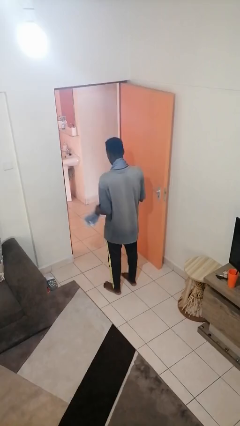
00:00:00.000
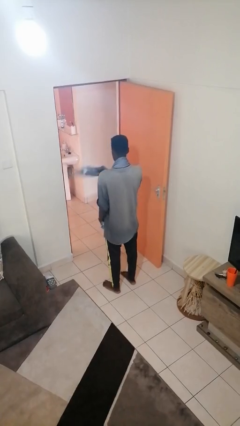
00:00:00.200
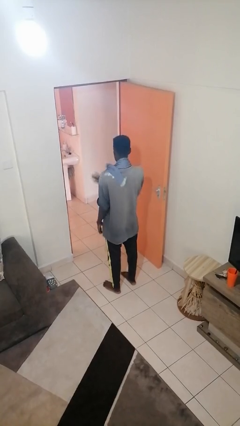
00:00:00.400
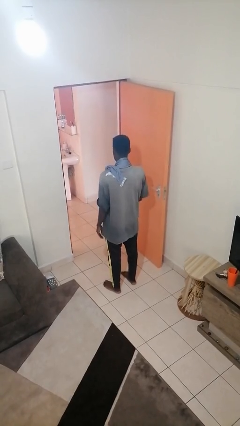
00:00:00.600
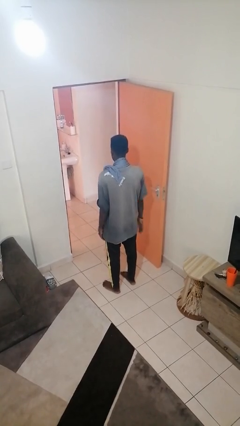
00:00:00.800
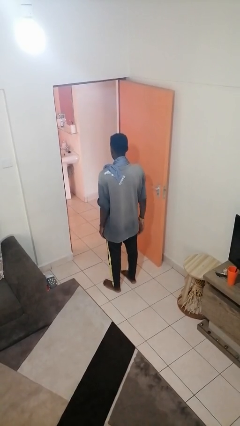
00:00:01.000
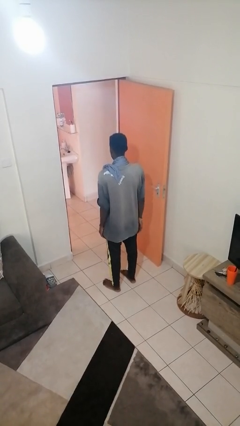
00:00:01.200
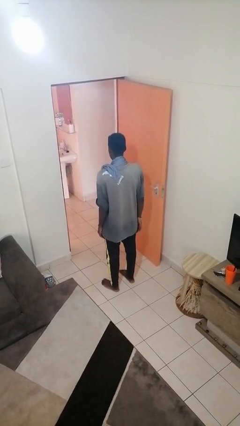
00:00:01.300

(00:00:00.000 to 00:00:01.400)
person puts on scarf

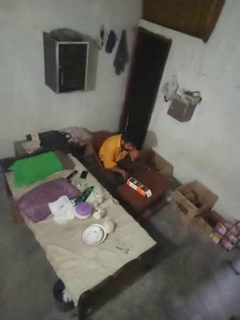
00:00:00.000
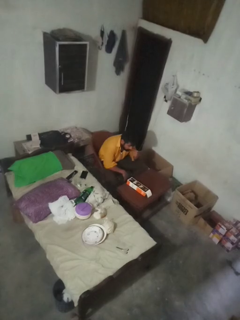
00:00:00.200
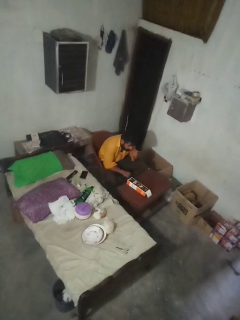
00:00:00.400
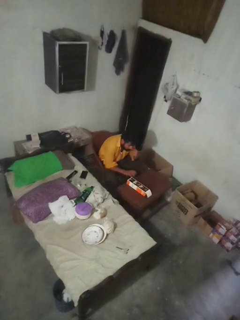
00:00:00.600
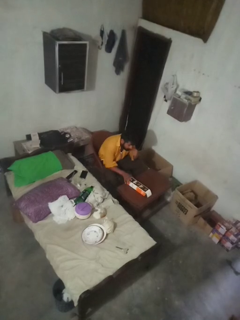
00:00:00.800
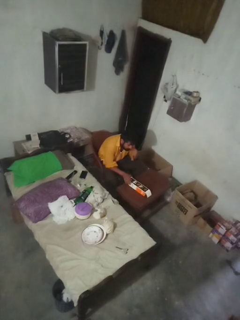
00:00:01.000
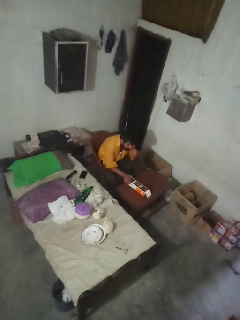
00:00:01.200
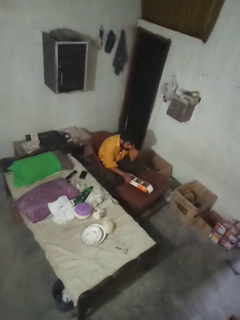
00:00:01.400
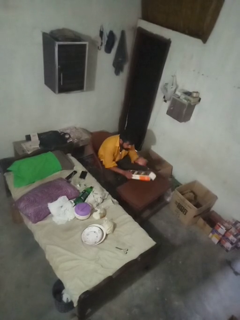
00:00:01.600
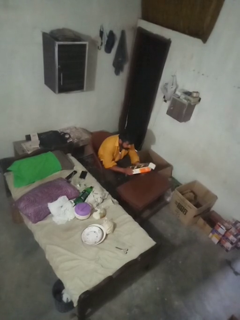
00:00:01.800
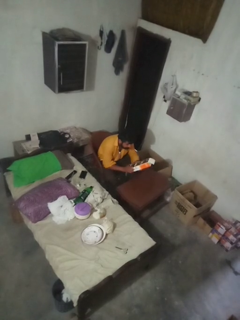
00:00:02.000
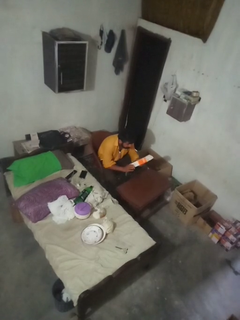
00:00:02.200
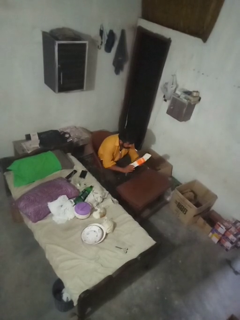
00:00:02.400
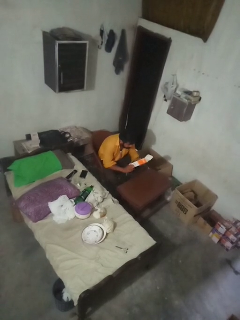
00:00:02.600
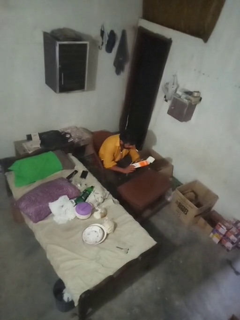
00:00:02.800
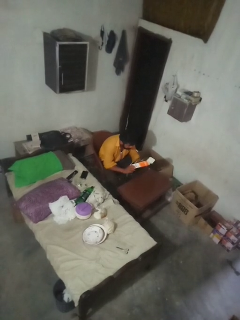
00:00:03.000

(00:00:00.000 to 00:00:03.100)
person picks up object from countertop

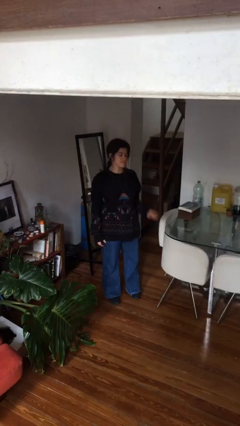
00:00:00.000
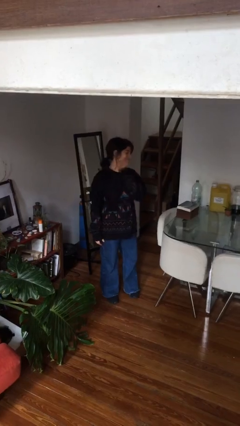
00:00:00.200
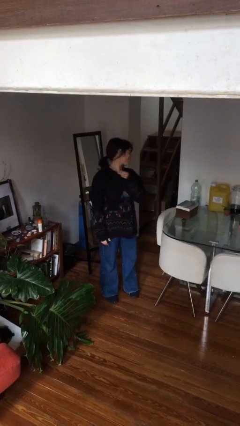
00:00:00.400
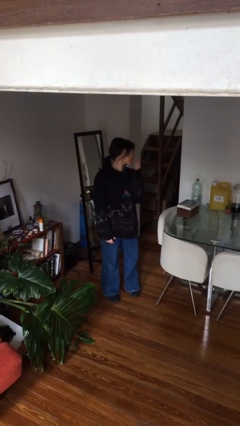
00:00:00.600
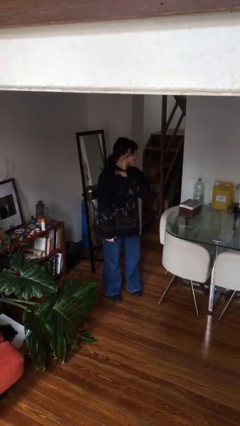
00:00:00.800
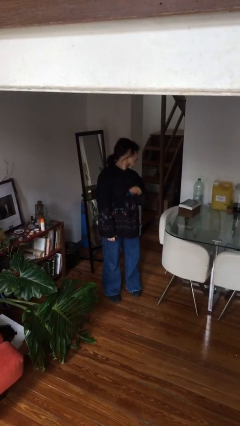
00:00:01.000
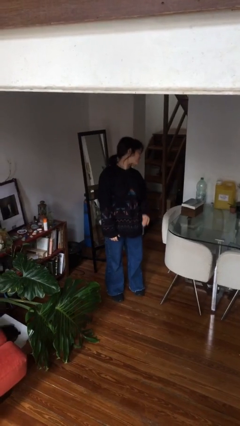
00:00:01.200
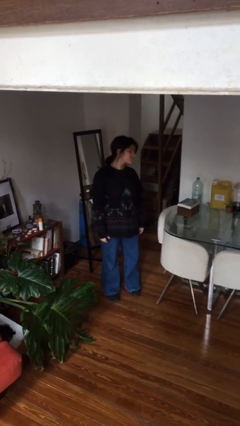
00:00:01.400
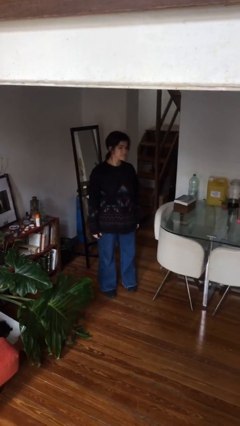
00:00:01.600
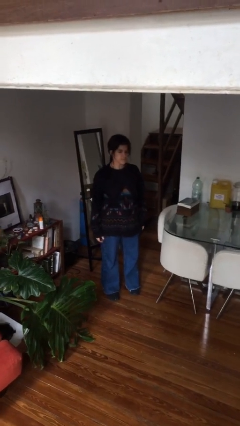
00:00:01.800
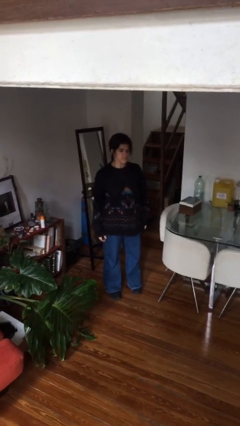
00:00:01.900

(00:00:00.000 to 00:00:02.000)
person swats bug

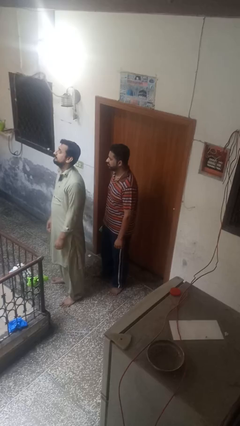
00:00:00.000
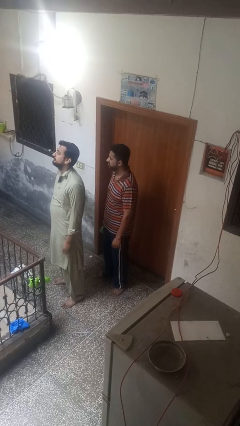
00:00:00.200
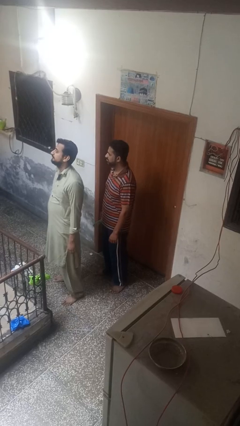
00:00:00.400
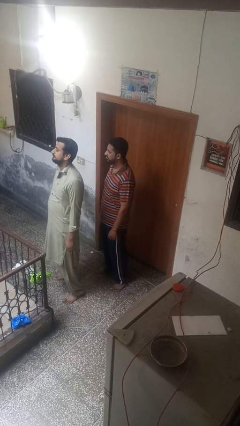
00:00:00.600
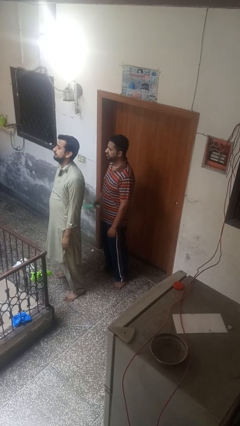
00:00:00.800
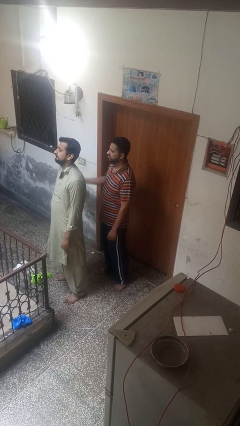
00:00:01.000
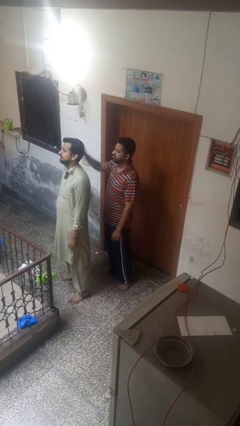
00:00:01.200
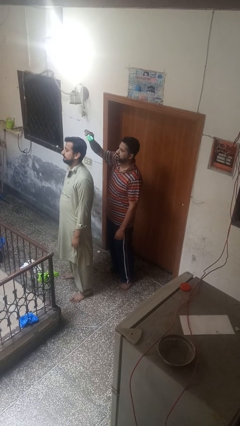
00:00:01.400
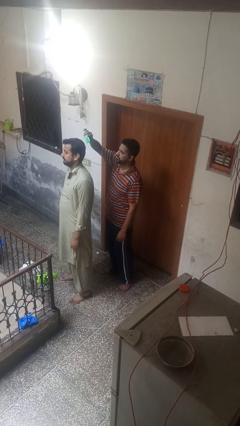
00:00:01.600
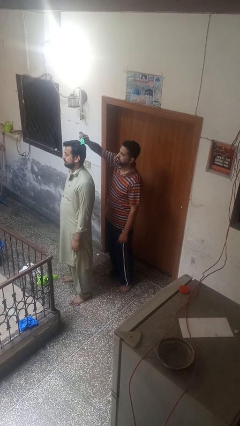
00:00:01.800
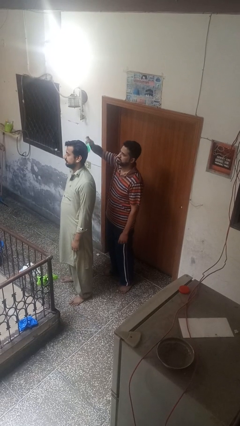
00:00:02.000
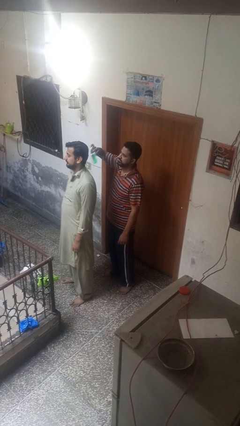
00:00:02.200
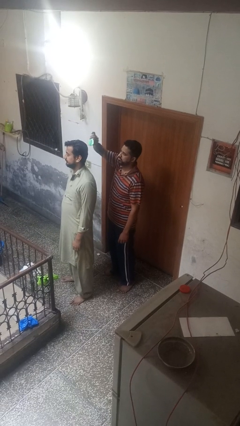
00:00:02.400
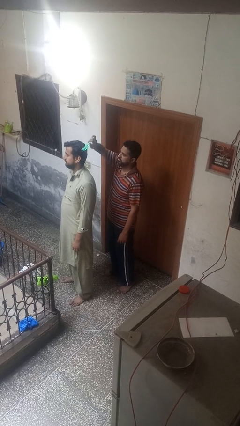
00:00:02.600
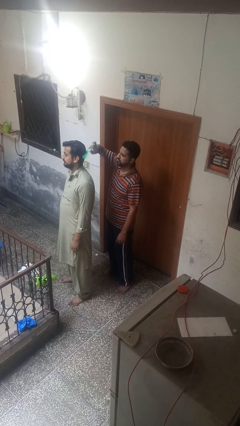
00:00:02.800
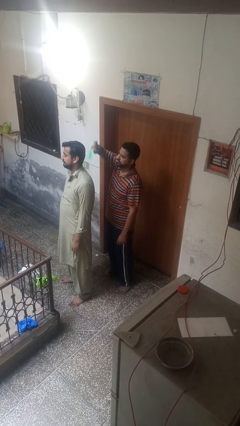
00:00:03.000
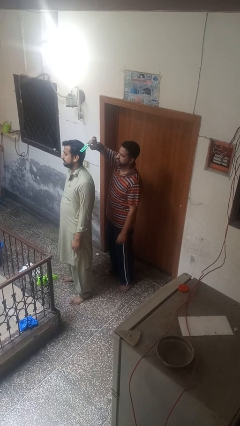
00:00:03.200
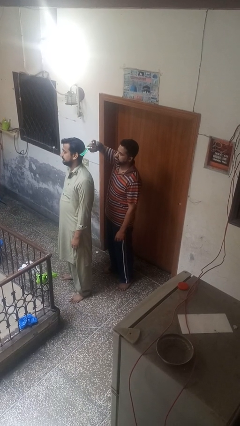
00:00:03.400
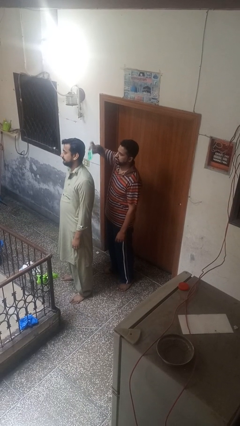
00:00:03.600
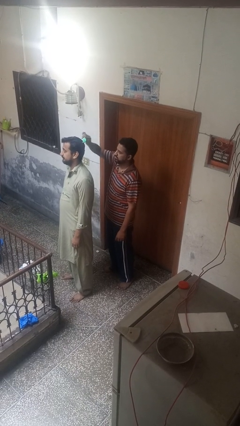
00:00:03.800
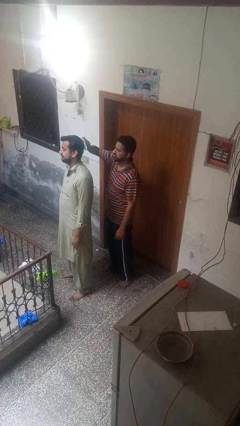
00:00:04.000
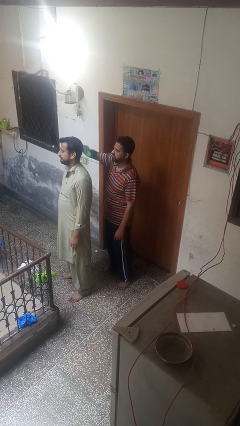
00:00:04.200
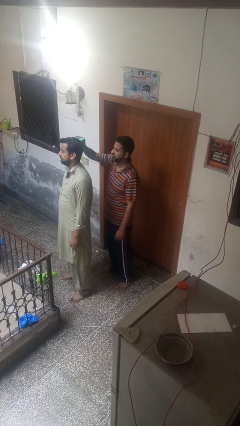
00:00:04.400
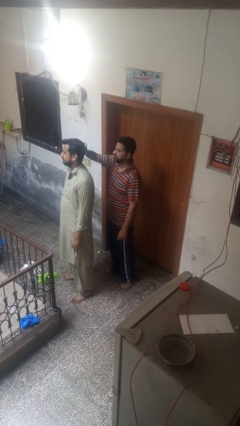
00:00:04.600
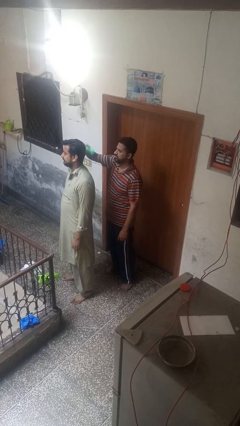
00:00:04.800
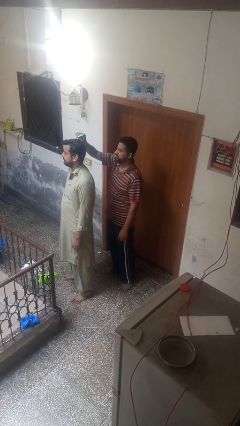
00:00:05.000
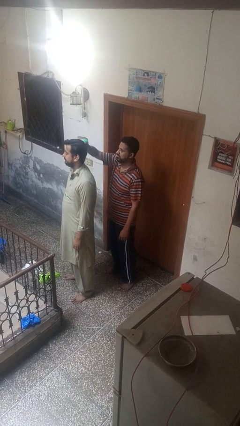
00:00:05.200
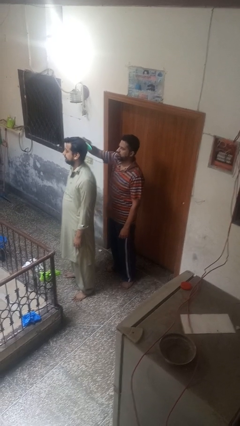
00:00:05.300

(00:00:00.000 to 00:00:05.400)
person brushes hair of person

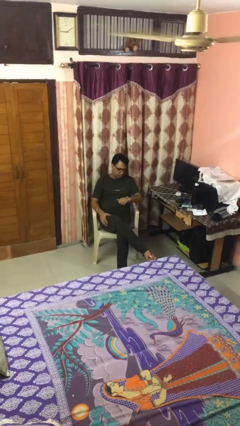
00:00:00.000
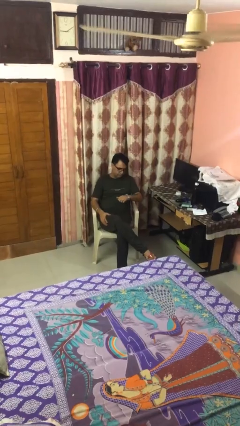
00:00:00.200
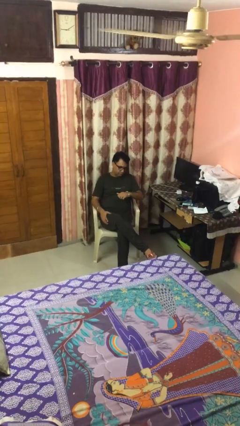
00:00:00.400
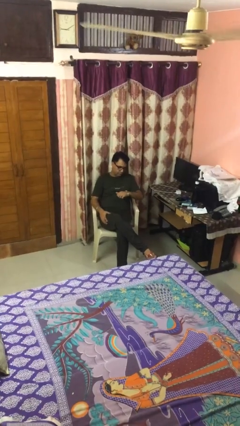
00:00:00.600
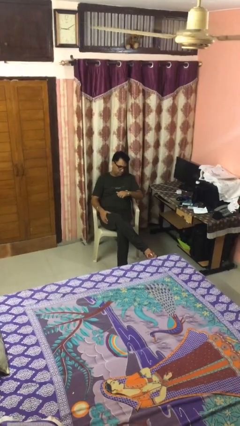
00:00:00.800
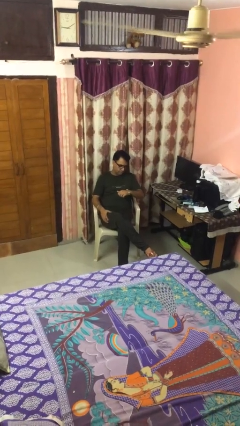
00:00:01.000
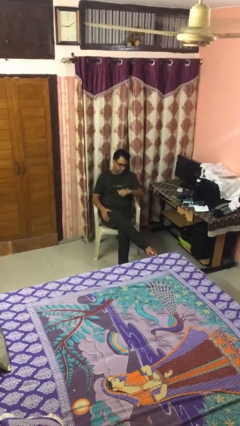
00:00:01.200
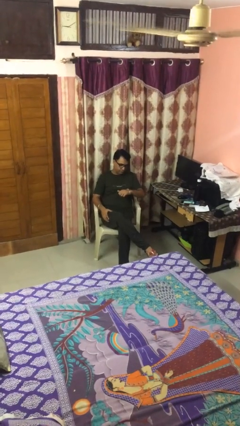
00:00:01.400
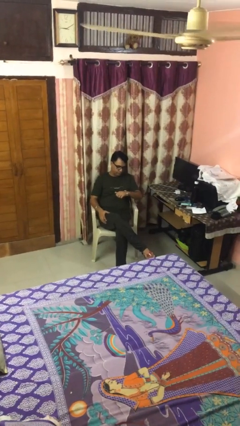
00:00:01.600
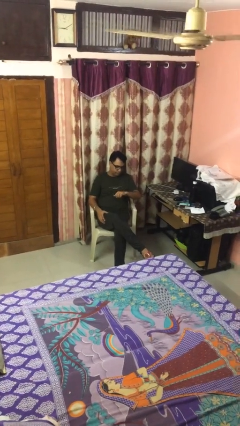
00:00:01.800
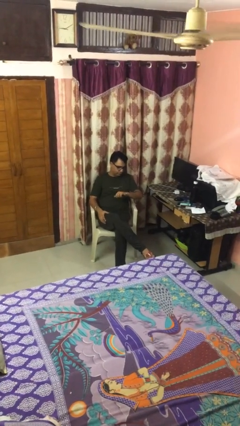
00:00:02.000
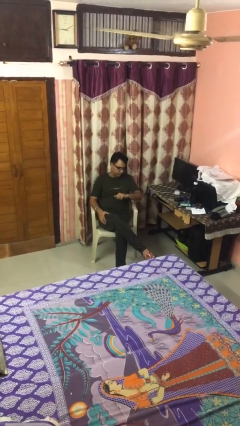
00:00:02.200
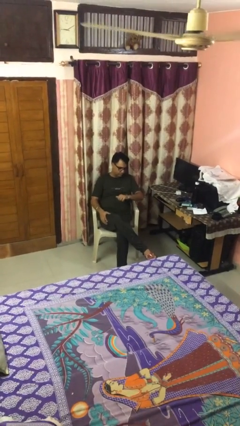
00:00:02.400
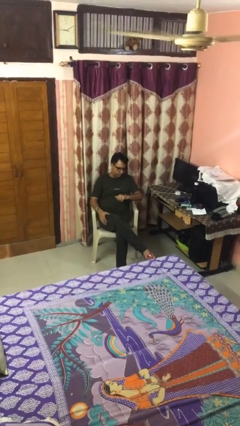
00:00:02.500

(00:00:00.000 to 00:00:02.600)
person looks at wristwatch

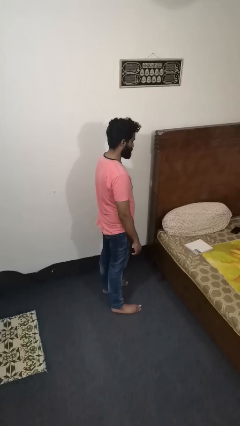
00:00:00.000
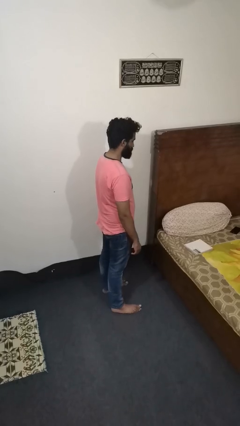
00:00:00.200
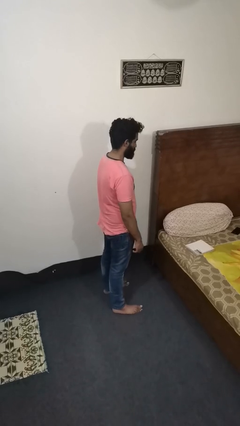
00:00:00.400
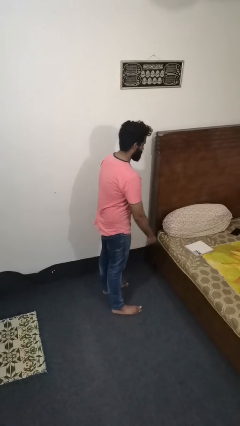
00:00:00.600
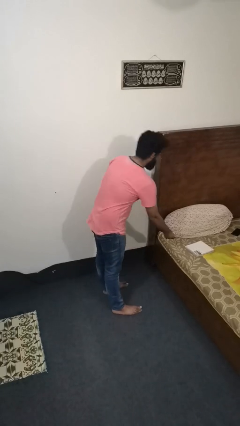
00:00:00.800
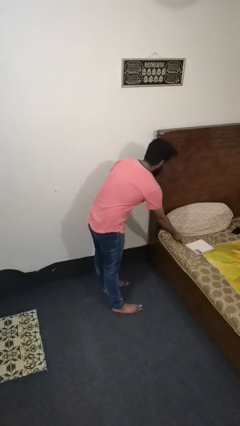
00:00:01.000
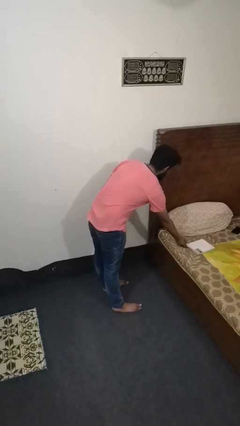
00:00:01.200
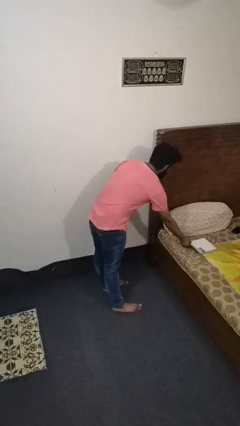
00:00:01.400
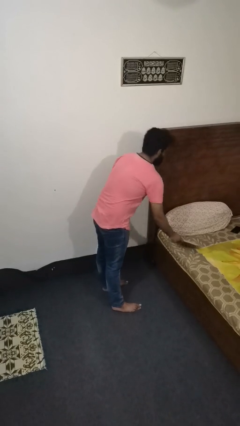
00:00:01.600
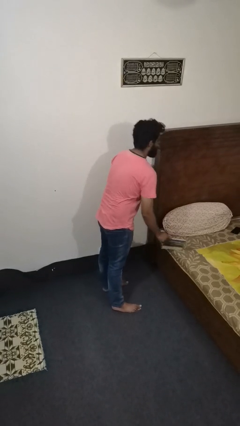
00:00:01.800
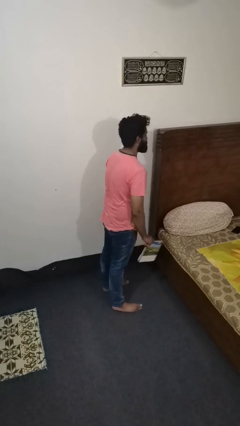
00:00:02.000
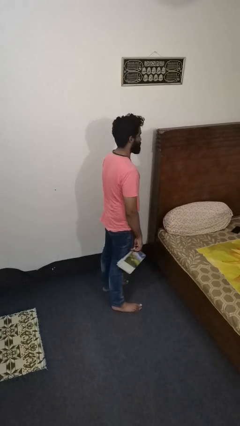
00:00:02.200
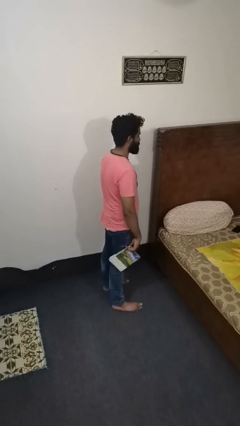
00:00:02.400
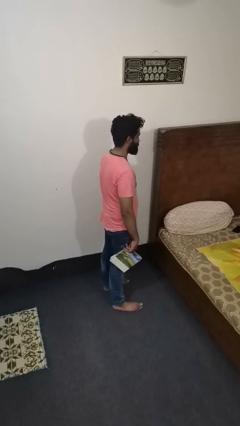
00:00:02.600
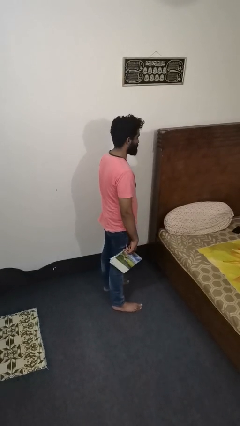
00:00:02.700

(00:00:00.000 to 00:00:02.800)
person picks up object from bed

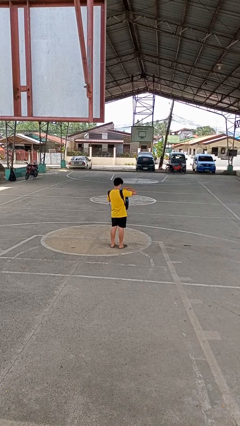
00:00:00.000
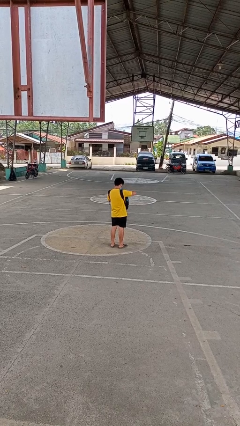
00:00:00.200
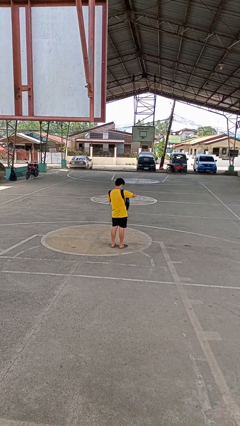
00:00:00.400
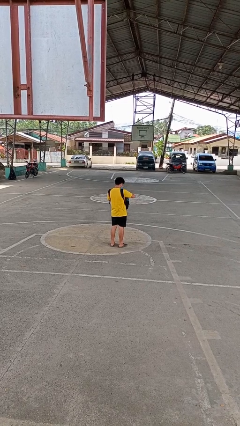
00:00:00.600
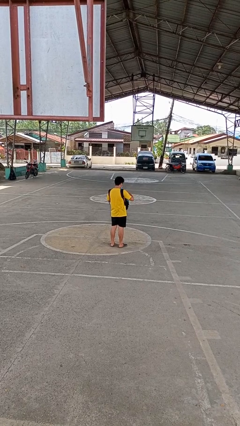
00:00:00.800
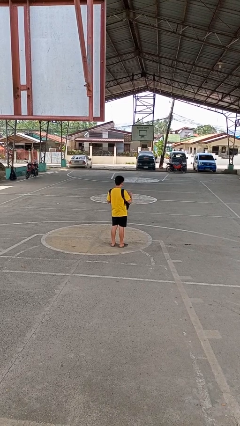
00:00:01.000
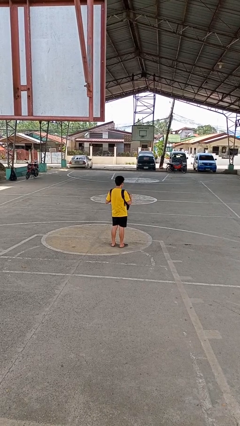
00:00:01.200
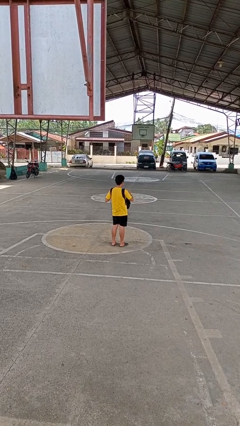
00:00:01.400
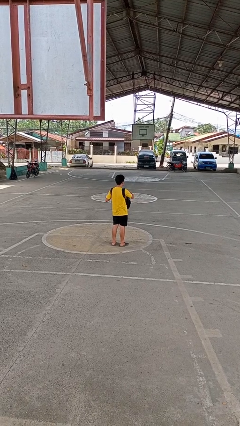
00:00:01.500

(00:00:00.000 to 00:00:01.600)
person puts object into backpack
